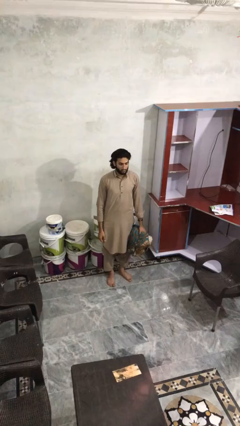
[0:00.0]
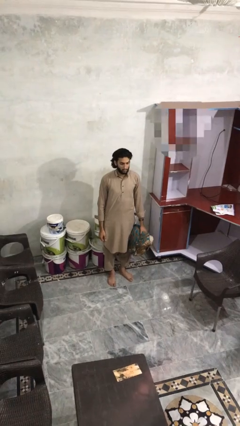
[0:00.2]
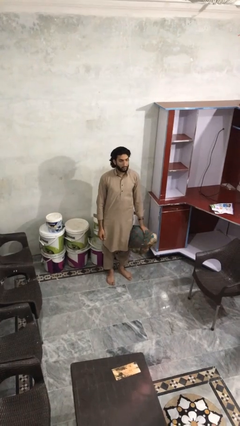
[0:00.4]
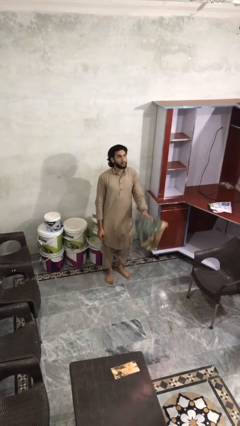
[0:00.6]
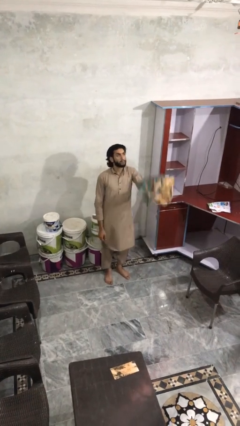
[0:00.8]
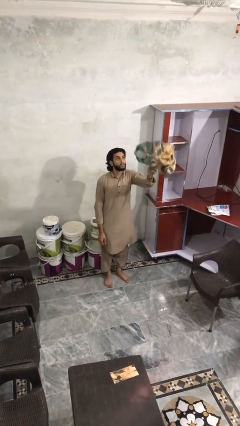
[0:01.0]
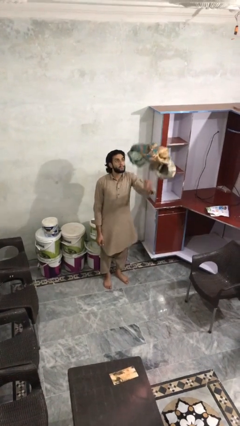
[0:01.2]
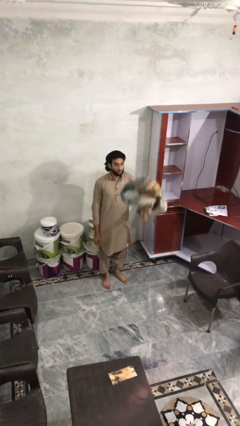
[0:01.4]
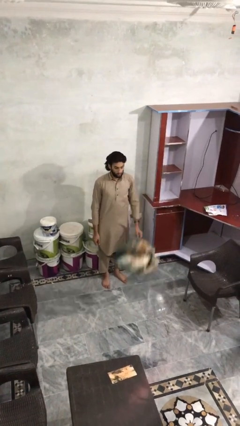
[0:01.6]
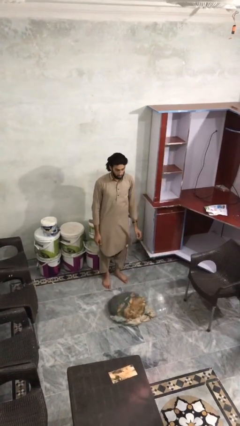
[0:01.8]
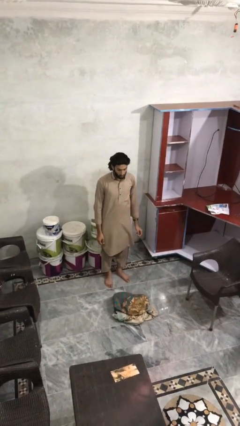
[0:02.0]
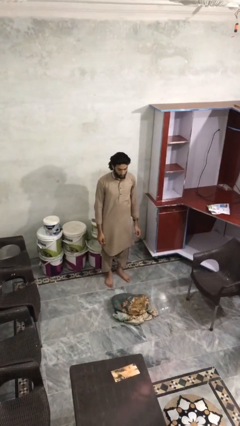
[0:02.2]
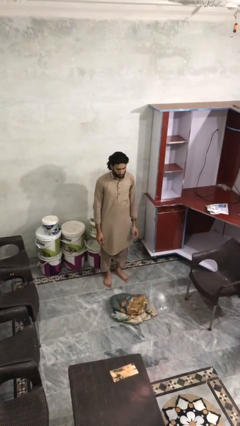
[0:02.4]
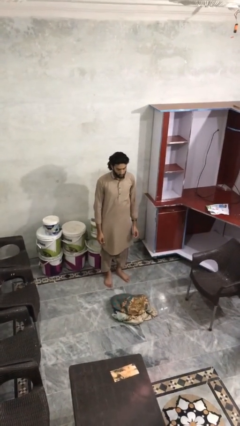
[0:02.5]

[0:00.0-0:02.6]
person throws object into air

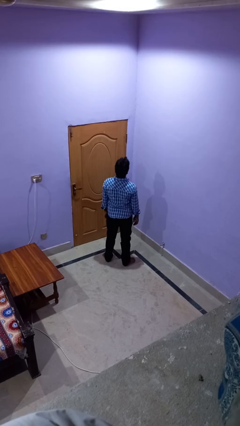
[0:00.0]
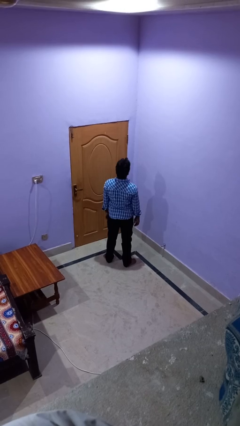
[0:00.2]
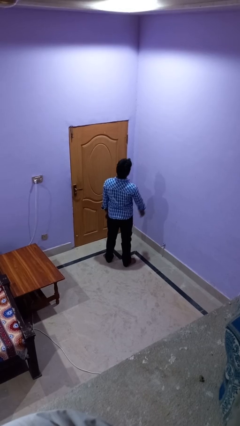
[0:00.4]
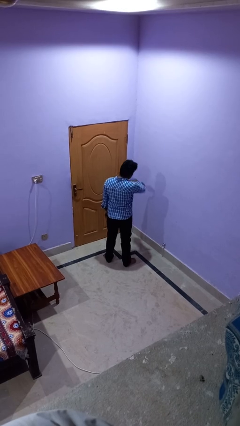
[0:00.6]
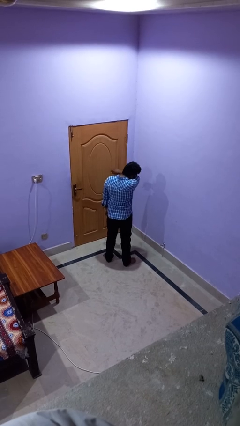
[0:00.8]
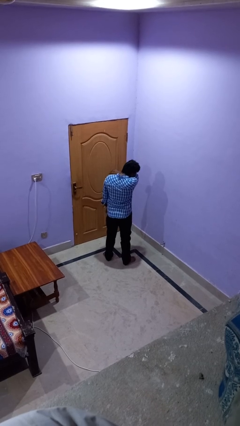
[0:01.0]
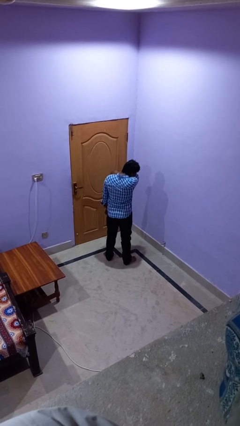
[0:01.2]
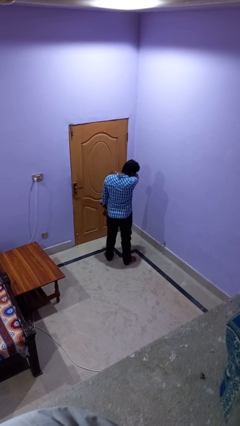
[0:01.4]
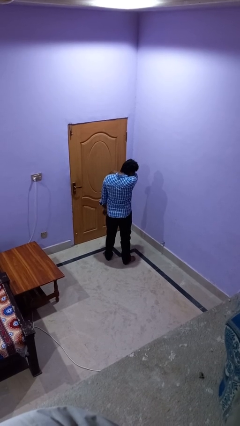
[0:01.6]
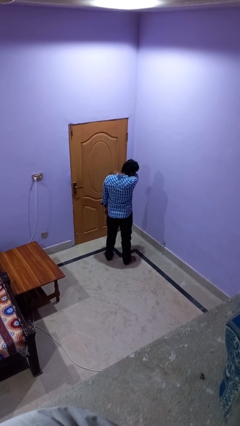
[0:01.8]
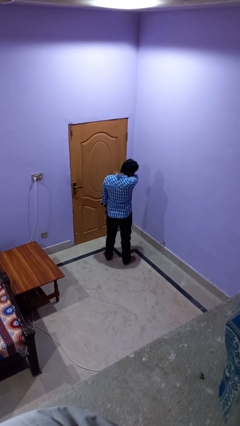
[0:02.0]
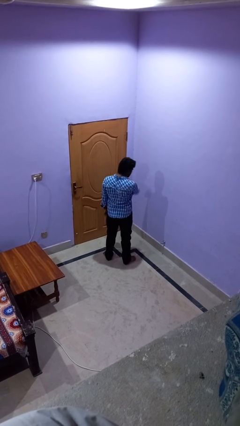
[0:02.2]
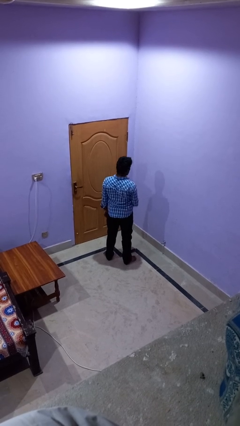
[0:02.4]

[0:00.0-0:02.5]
person sneezes into arm

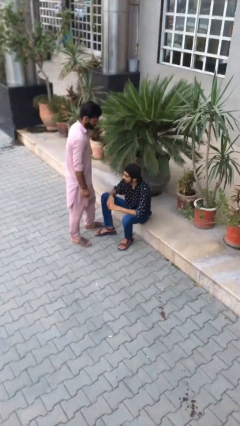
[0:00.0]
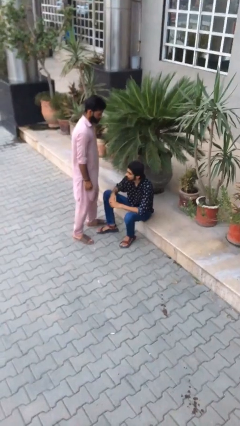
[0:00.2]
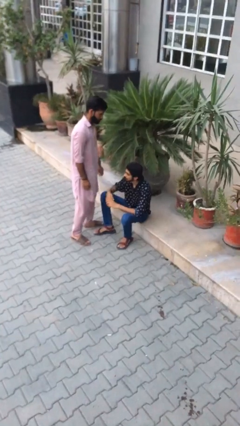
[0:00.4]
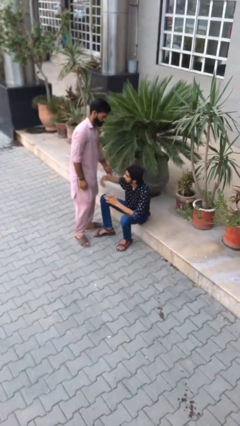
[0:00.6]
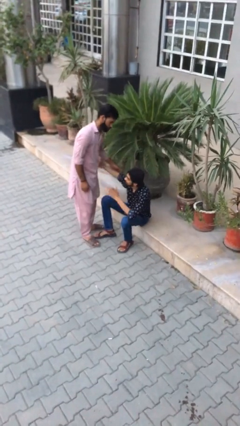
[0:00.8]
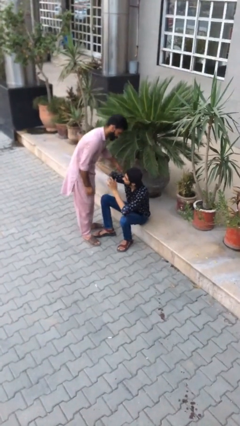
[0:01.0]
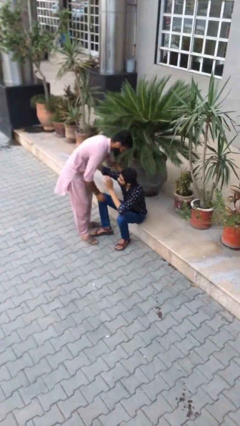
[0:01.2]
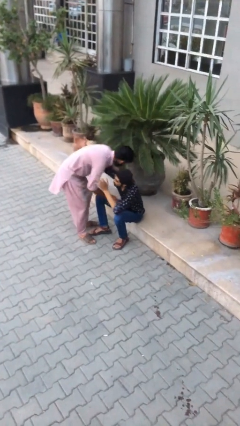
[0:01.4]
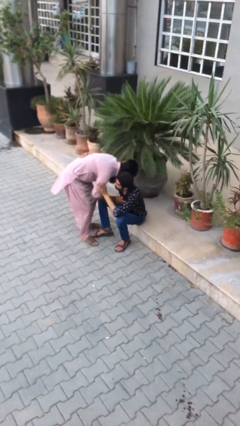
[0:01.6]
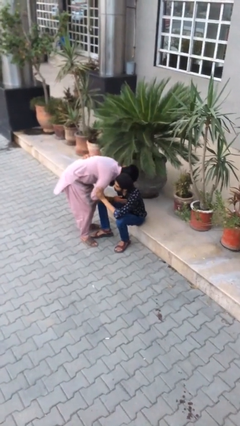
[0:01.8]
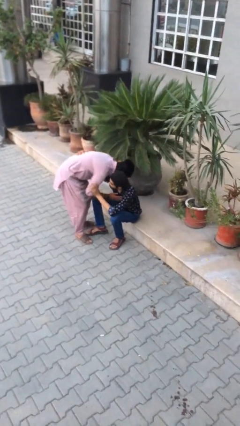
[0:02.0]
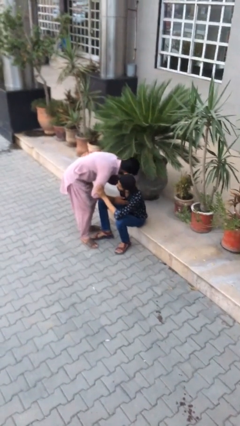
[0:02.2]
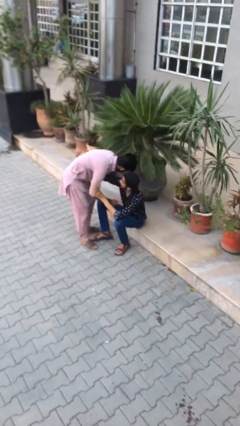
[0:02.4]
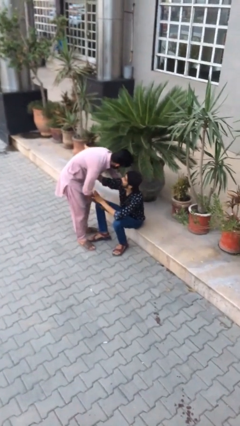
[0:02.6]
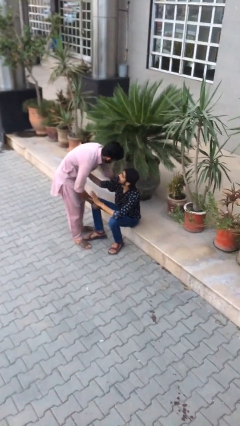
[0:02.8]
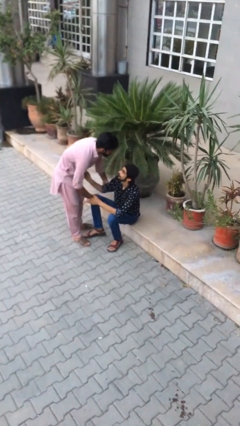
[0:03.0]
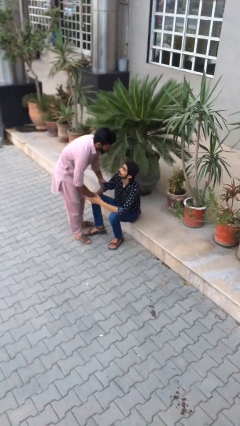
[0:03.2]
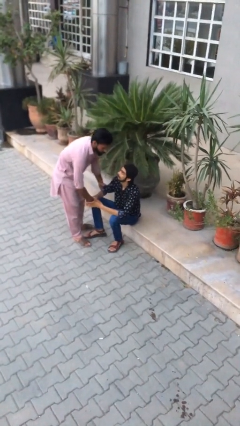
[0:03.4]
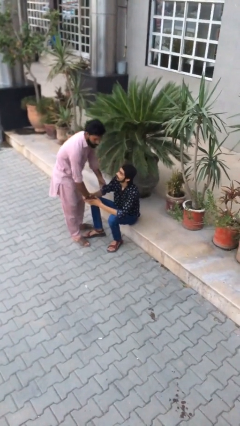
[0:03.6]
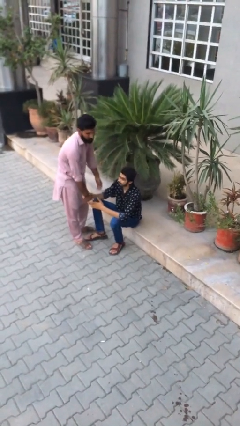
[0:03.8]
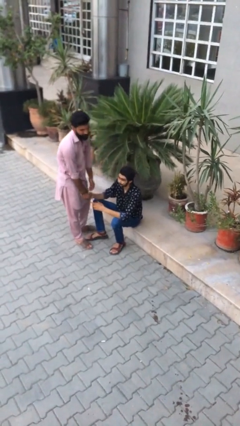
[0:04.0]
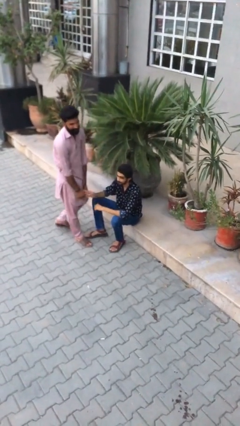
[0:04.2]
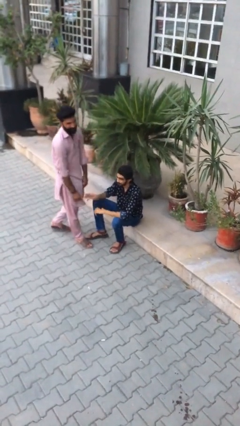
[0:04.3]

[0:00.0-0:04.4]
person embraces person

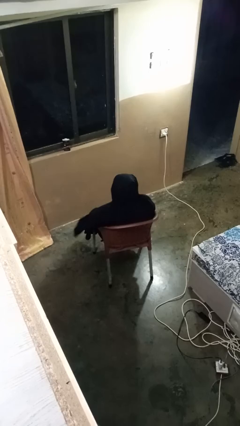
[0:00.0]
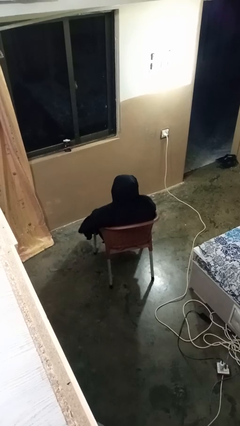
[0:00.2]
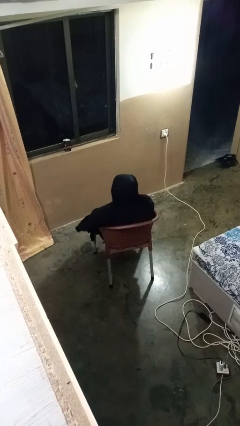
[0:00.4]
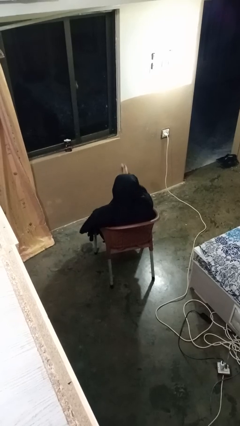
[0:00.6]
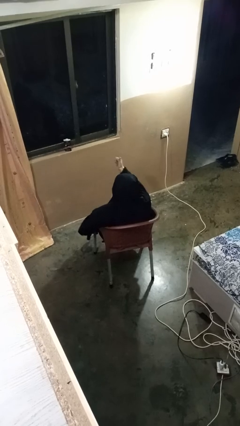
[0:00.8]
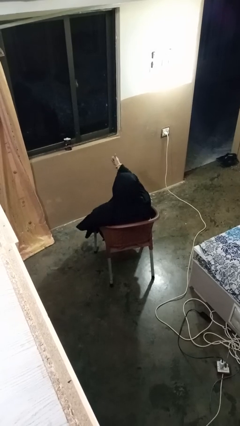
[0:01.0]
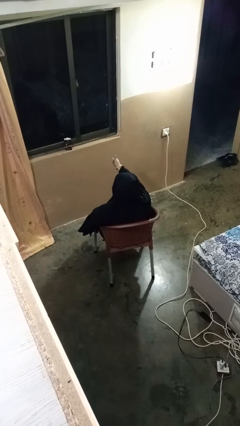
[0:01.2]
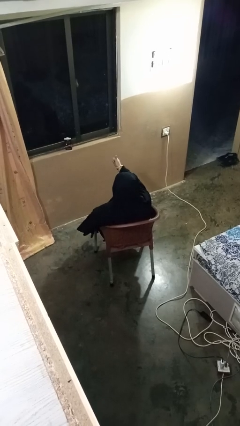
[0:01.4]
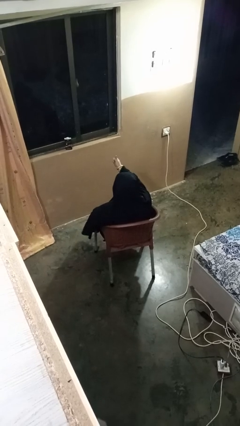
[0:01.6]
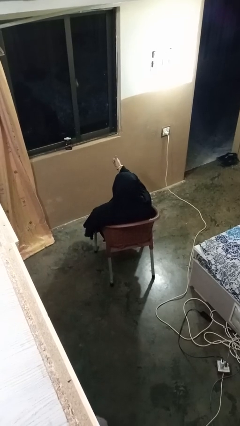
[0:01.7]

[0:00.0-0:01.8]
person gestures thumbs up

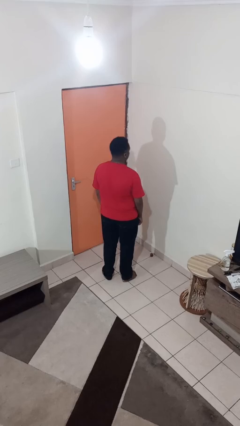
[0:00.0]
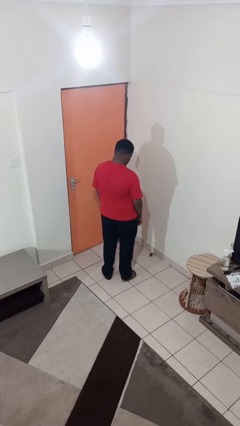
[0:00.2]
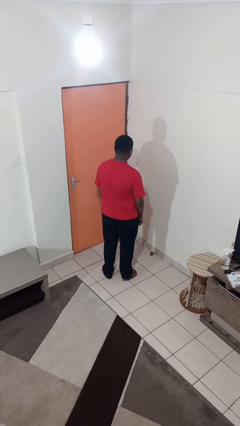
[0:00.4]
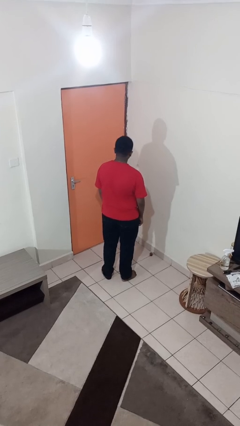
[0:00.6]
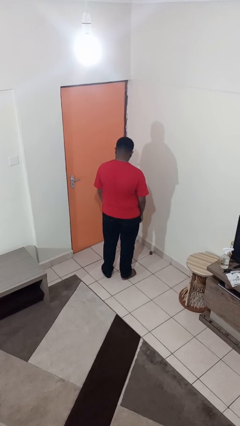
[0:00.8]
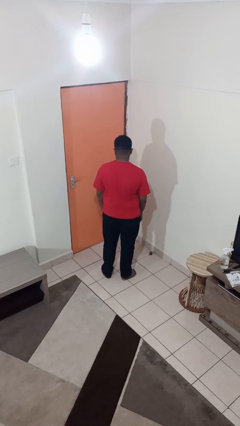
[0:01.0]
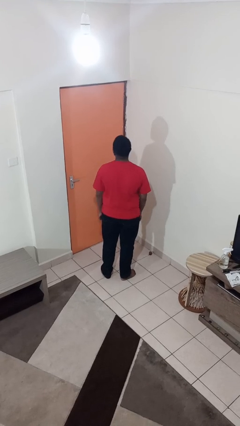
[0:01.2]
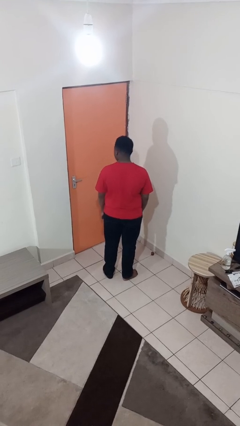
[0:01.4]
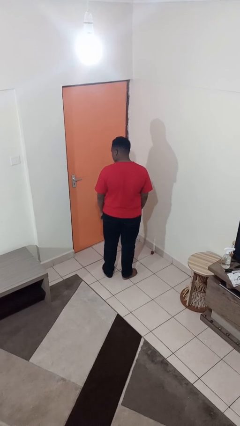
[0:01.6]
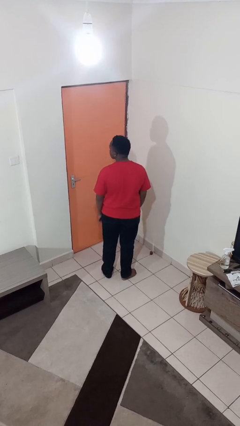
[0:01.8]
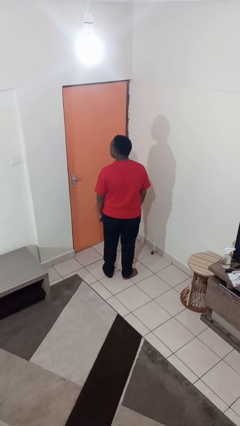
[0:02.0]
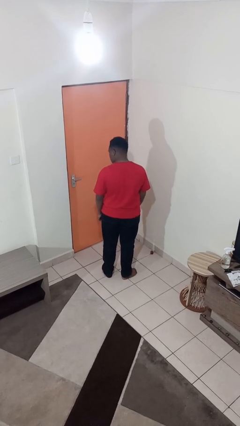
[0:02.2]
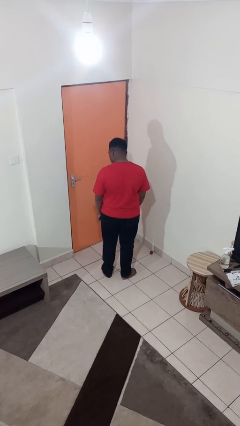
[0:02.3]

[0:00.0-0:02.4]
person nods head

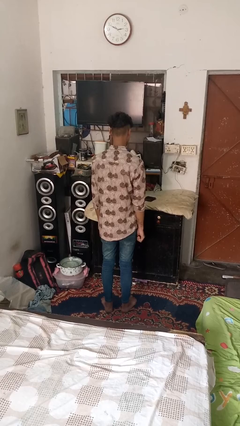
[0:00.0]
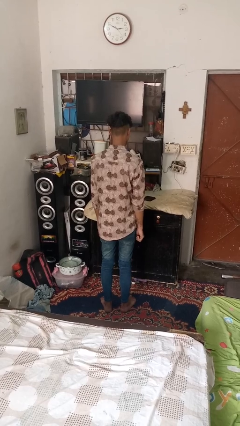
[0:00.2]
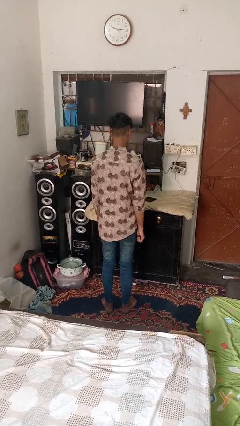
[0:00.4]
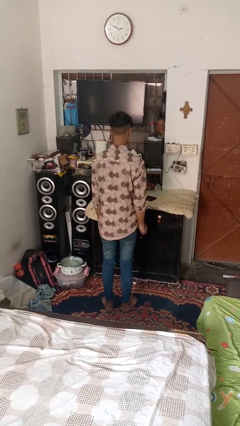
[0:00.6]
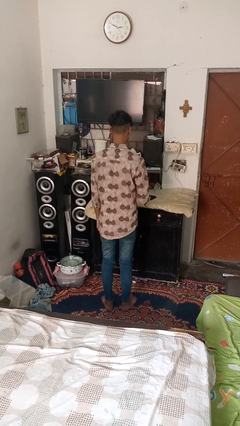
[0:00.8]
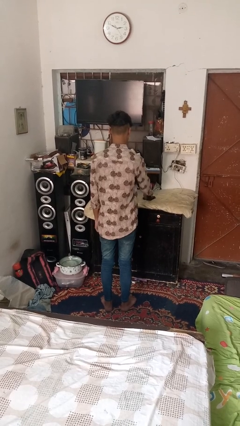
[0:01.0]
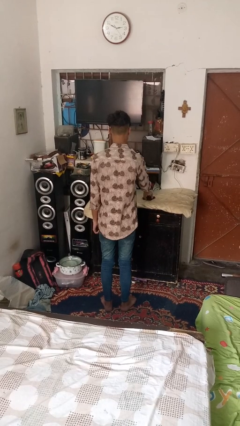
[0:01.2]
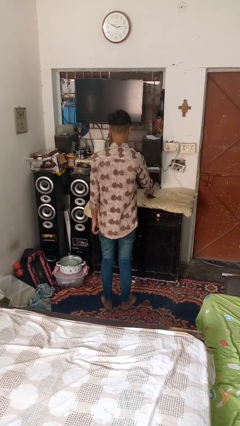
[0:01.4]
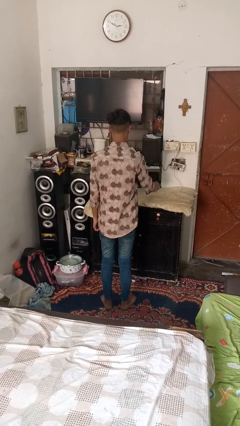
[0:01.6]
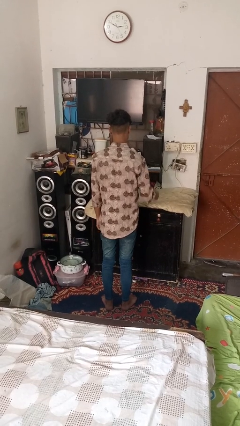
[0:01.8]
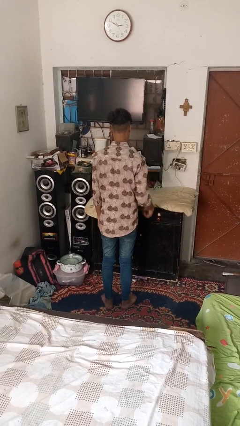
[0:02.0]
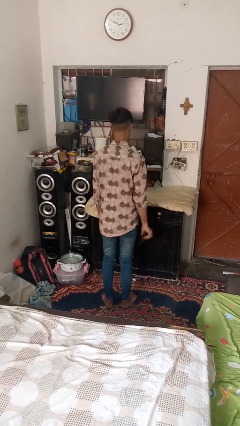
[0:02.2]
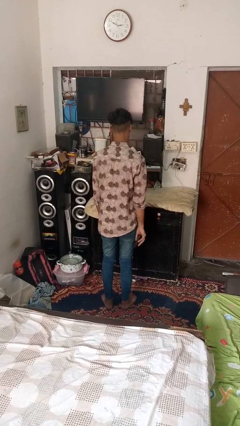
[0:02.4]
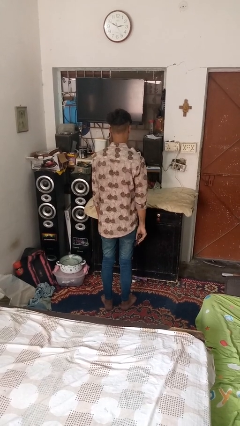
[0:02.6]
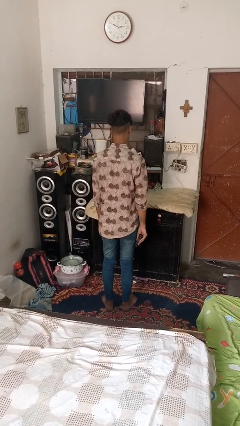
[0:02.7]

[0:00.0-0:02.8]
person picks up object from table

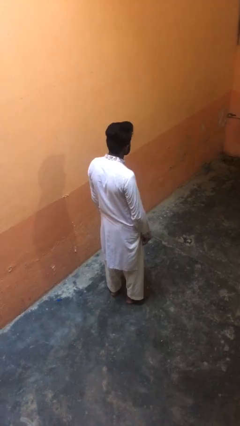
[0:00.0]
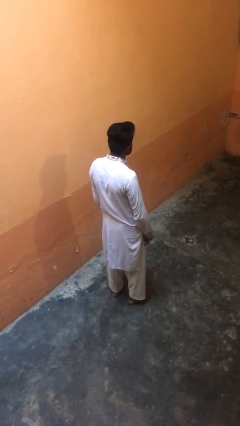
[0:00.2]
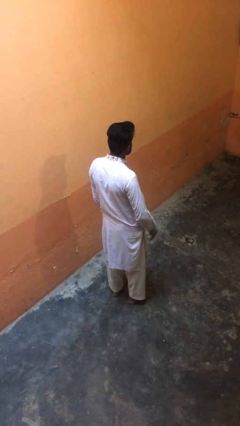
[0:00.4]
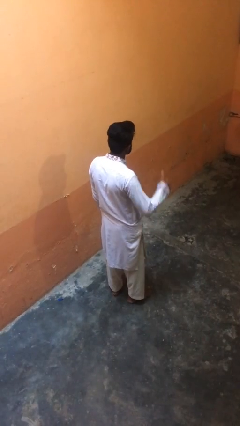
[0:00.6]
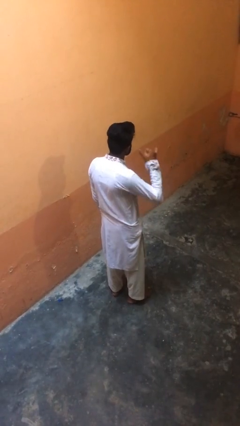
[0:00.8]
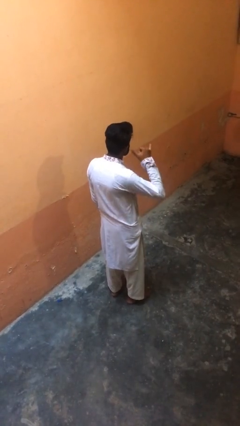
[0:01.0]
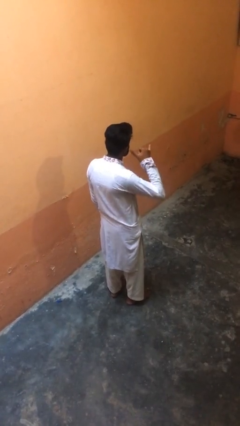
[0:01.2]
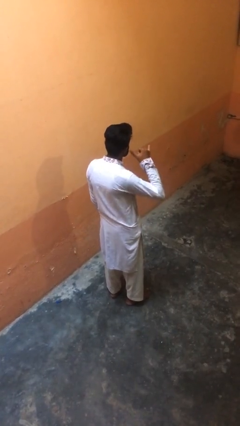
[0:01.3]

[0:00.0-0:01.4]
person gestures call me
